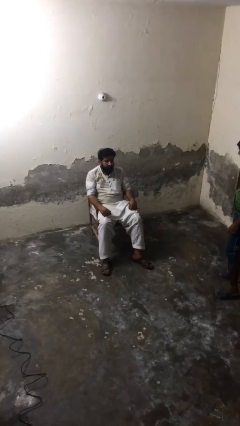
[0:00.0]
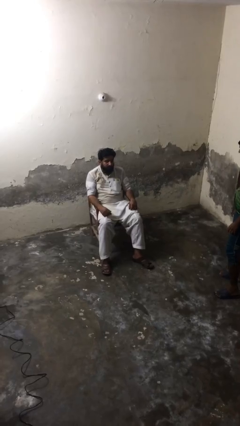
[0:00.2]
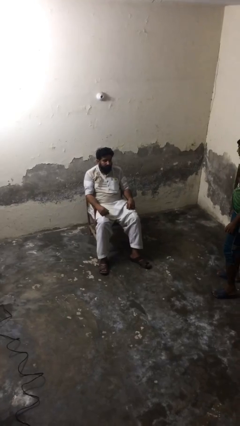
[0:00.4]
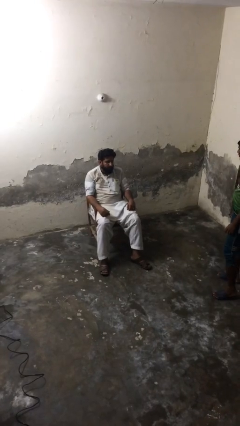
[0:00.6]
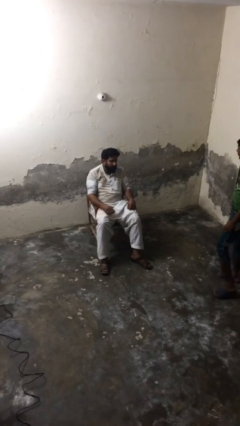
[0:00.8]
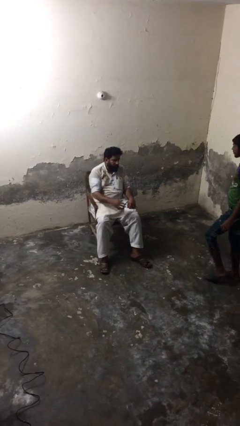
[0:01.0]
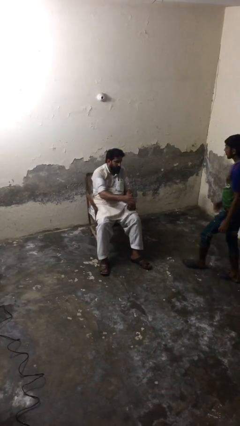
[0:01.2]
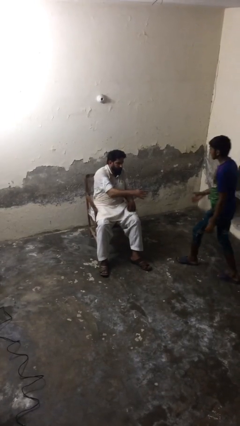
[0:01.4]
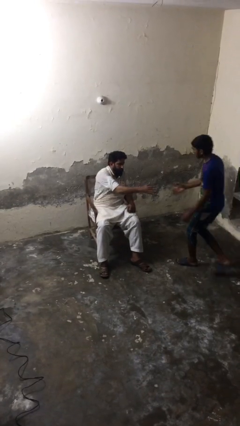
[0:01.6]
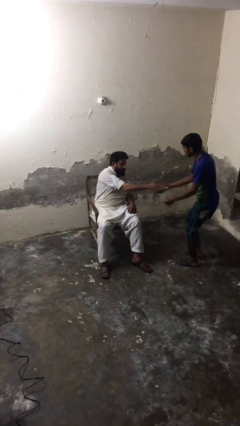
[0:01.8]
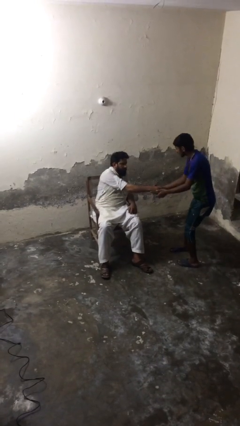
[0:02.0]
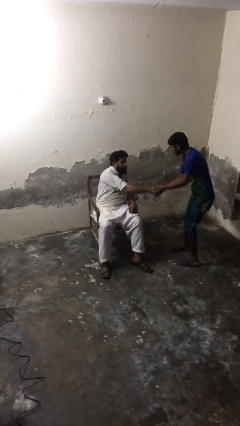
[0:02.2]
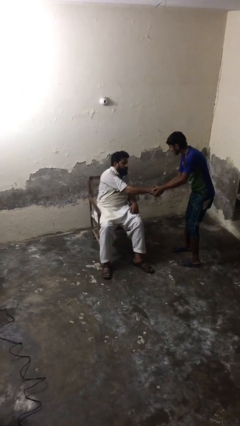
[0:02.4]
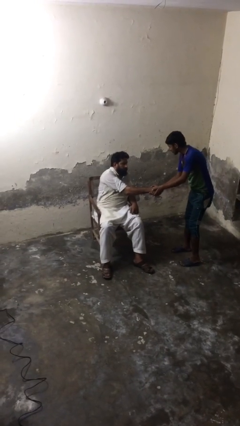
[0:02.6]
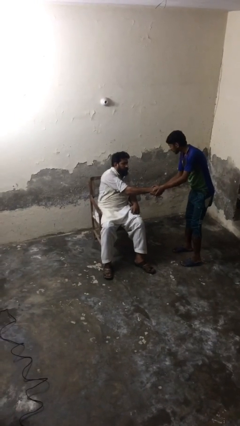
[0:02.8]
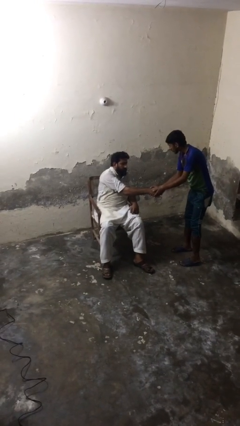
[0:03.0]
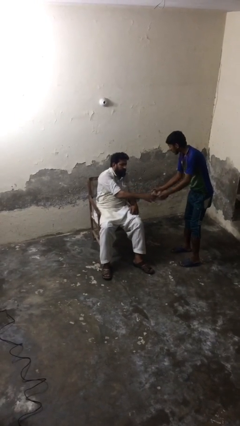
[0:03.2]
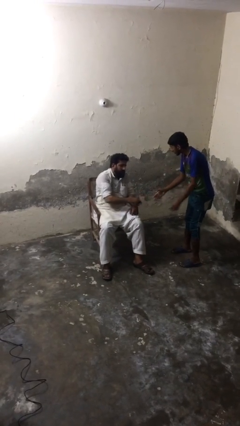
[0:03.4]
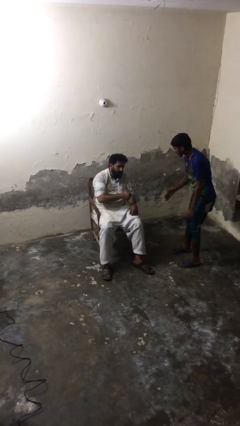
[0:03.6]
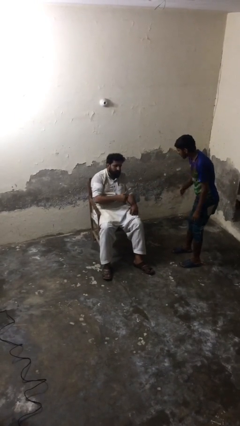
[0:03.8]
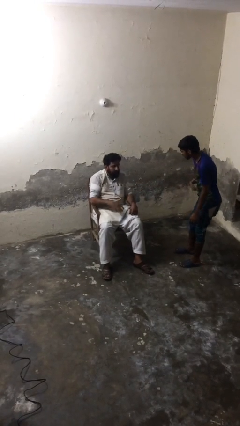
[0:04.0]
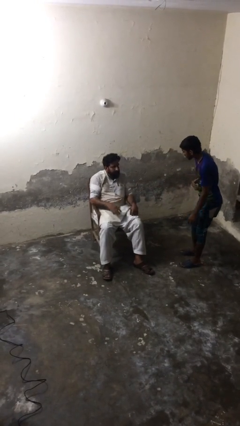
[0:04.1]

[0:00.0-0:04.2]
person shakes hand

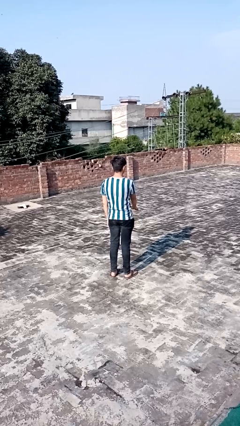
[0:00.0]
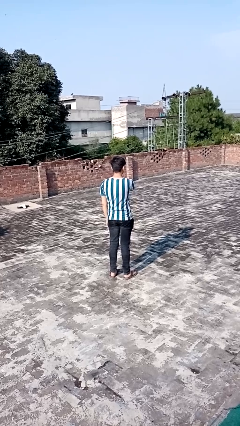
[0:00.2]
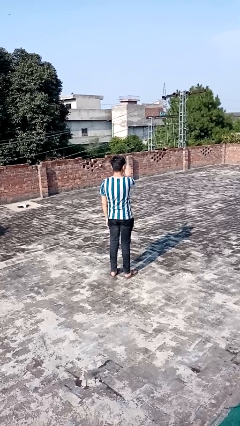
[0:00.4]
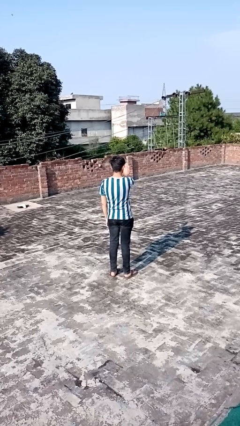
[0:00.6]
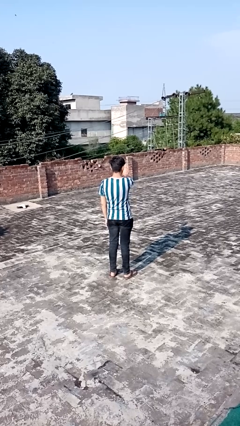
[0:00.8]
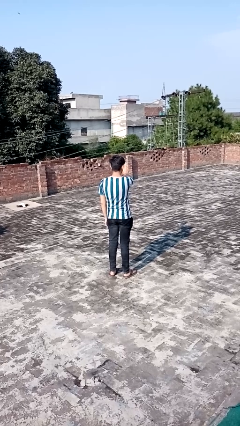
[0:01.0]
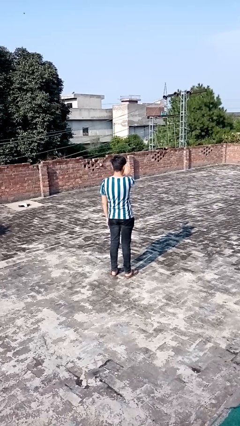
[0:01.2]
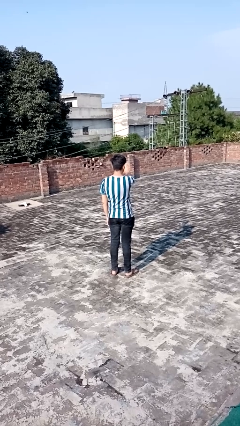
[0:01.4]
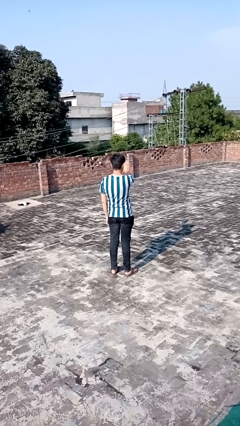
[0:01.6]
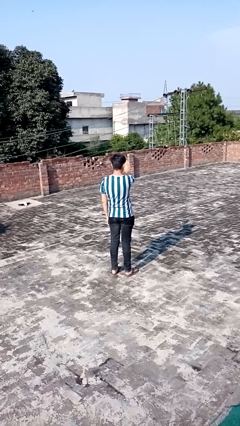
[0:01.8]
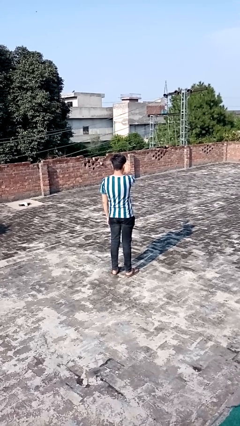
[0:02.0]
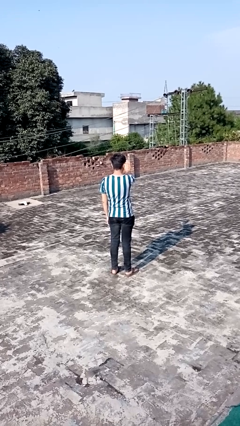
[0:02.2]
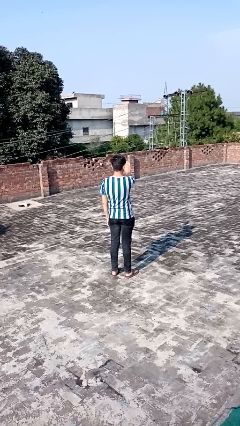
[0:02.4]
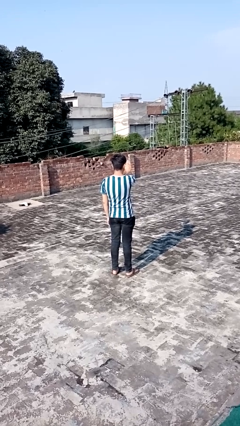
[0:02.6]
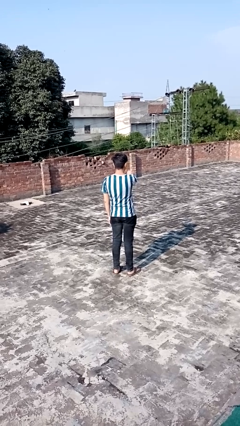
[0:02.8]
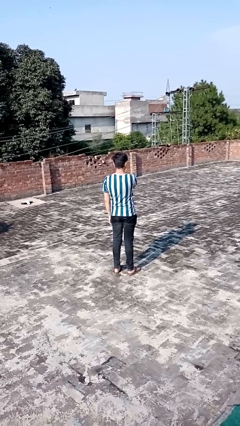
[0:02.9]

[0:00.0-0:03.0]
person gestures stop

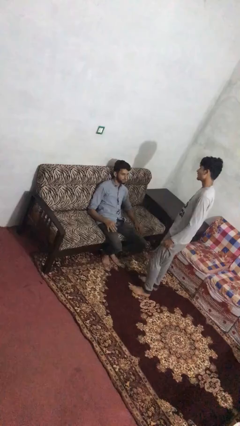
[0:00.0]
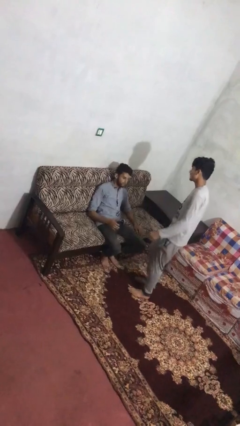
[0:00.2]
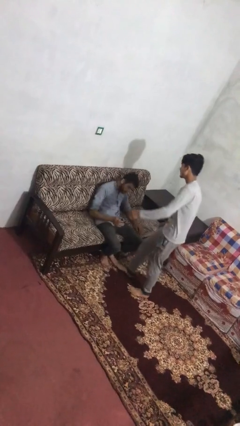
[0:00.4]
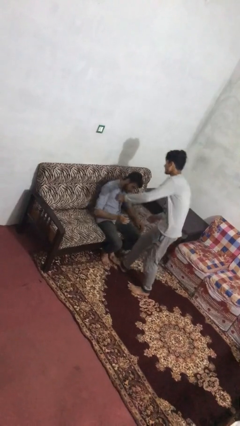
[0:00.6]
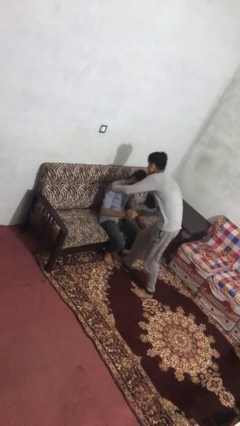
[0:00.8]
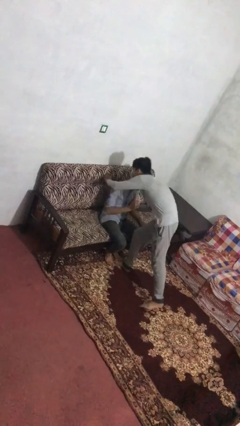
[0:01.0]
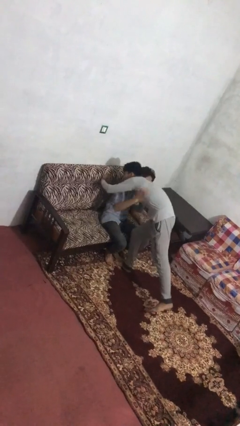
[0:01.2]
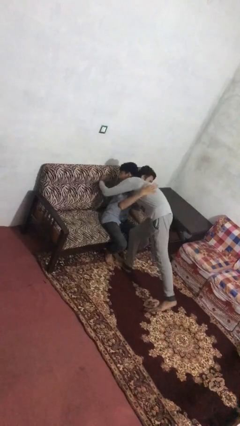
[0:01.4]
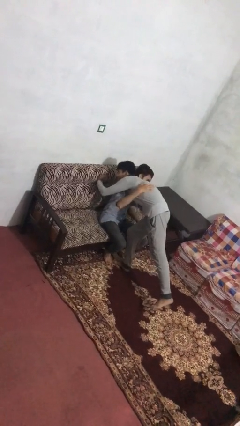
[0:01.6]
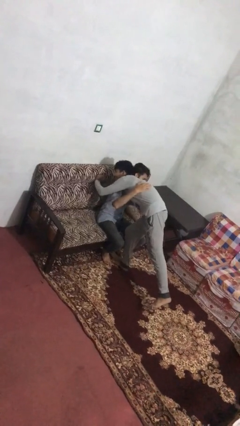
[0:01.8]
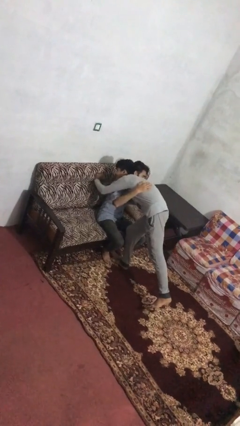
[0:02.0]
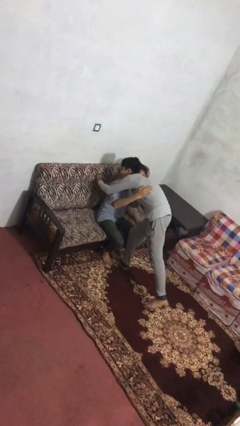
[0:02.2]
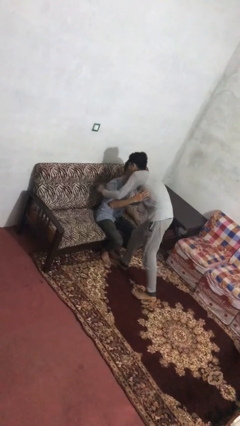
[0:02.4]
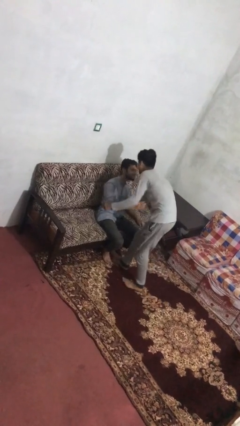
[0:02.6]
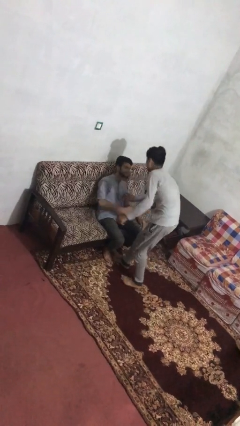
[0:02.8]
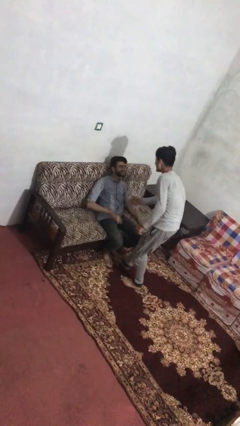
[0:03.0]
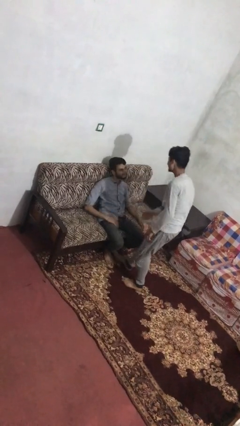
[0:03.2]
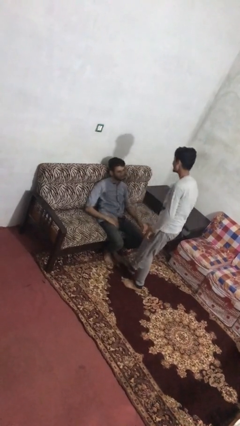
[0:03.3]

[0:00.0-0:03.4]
person embraces person

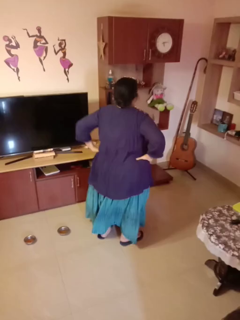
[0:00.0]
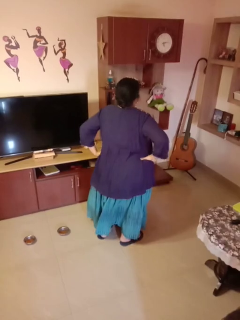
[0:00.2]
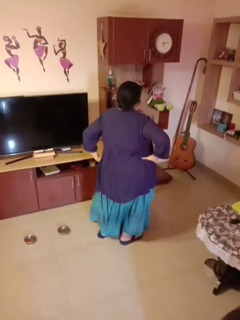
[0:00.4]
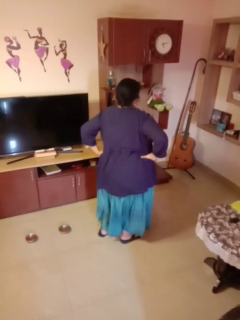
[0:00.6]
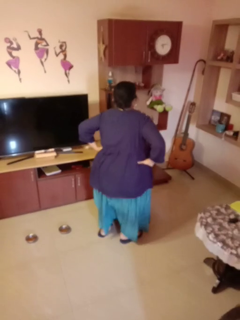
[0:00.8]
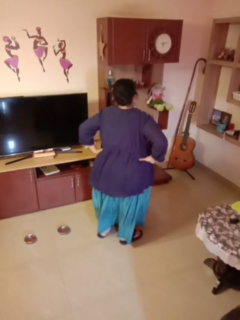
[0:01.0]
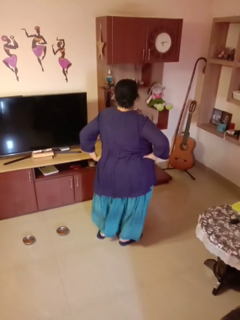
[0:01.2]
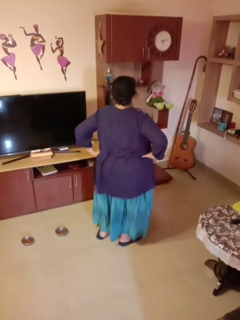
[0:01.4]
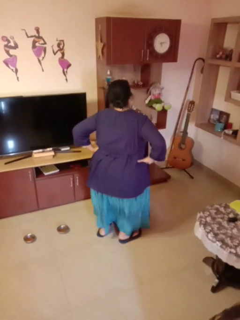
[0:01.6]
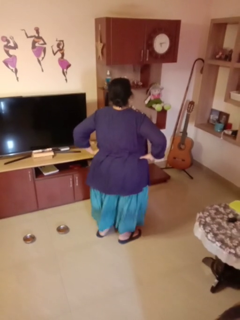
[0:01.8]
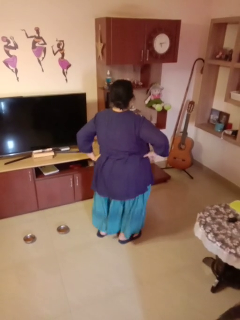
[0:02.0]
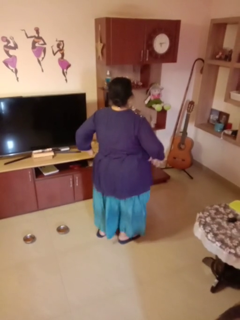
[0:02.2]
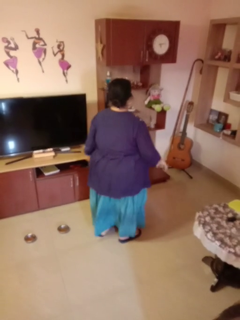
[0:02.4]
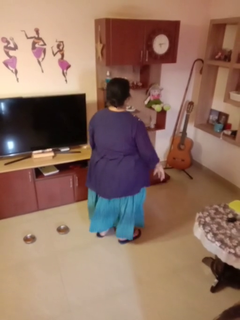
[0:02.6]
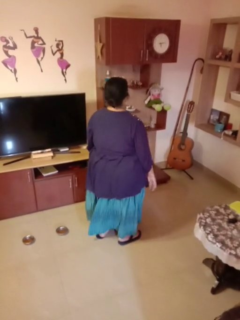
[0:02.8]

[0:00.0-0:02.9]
person wiggles hips

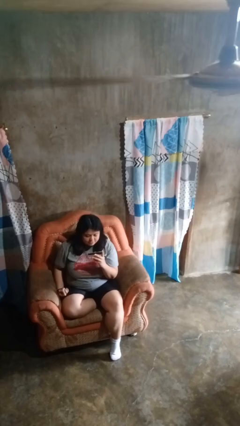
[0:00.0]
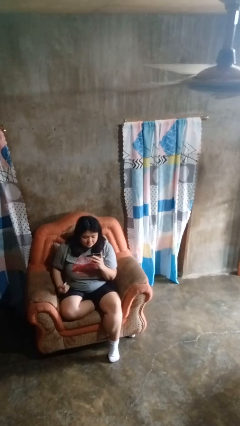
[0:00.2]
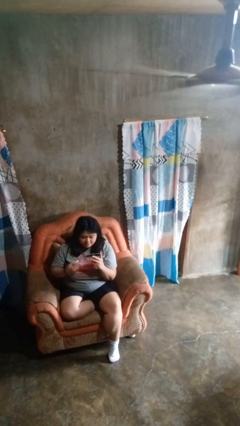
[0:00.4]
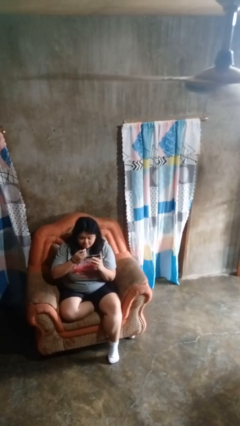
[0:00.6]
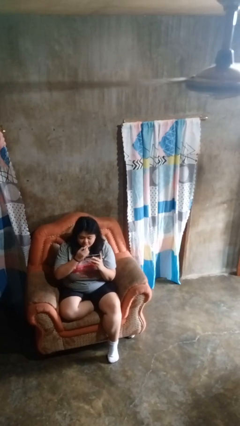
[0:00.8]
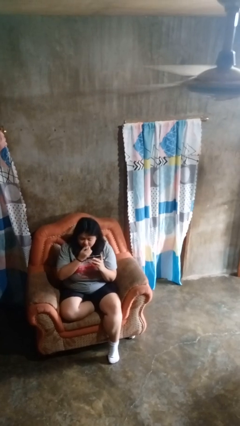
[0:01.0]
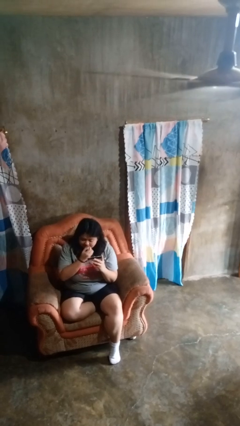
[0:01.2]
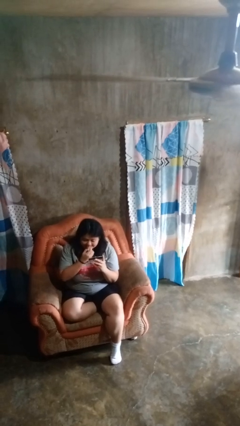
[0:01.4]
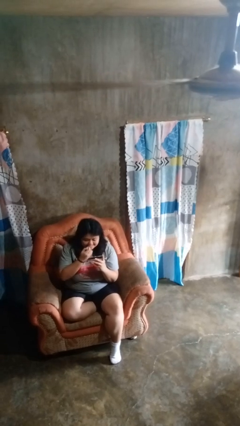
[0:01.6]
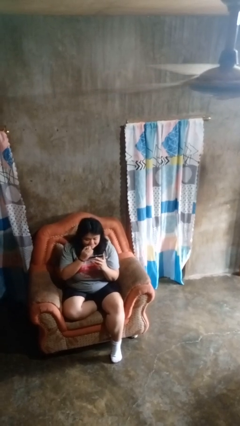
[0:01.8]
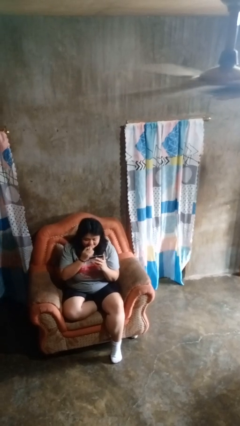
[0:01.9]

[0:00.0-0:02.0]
person applies lip makeup

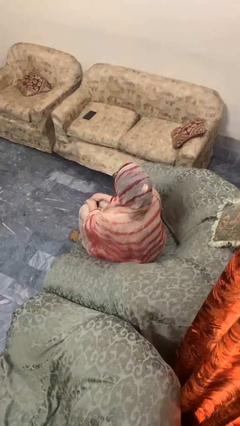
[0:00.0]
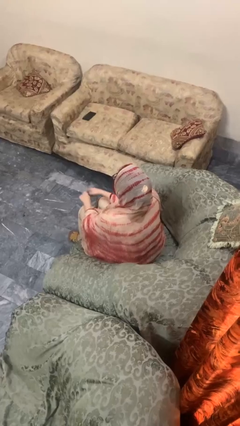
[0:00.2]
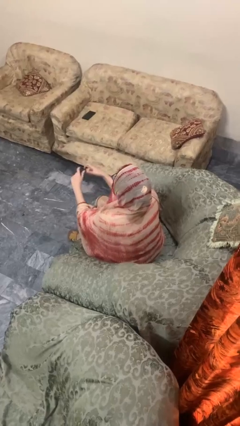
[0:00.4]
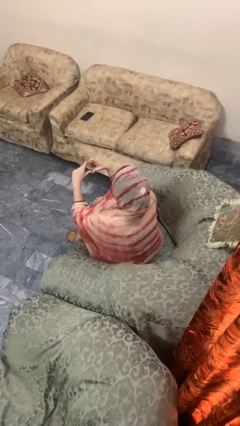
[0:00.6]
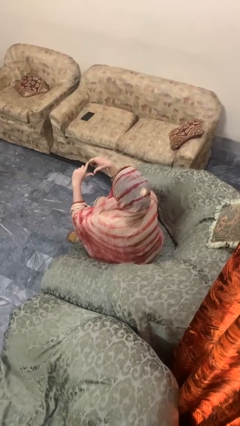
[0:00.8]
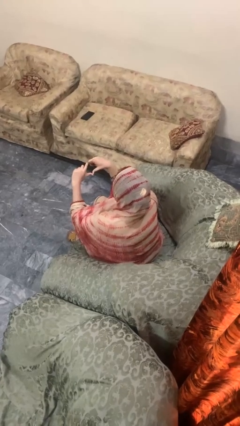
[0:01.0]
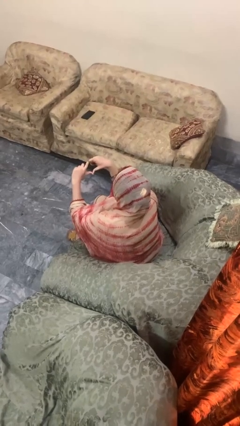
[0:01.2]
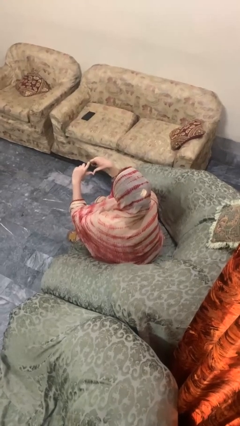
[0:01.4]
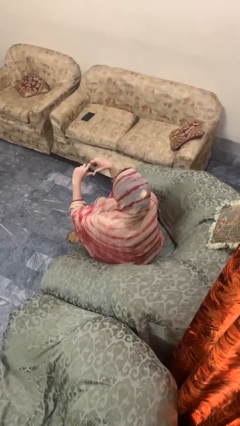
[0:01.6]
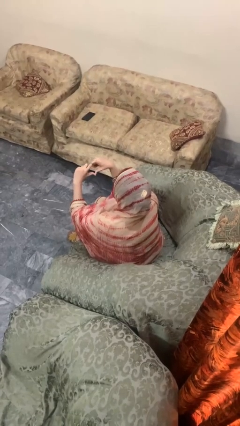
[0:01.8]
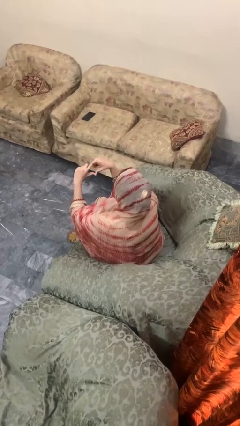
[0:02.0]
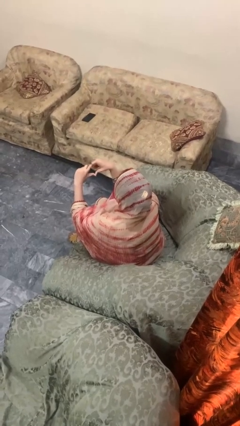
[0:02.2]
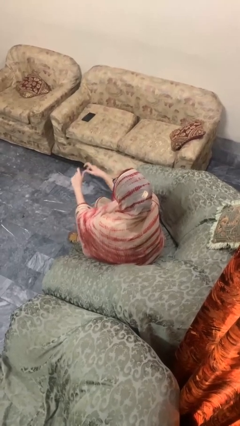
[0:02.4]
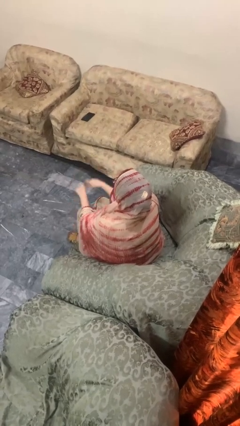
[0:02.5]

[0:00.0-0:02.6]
person gestures heart
